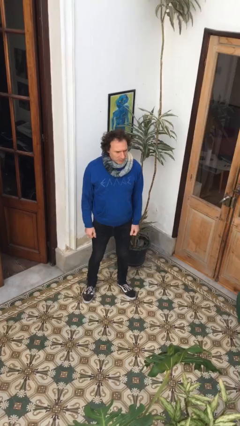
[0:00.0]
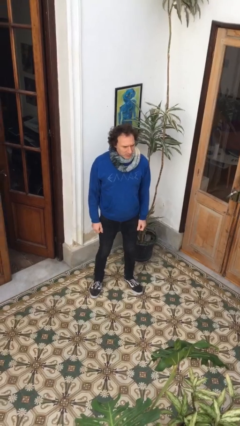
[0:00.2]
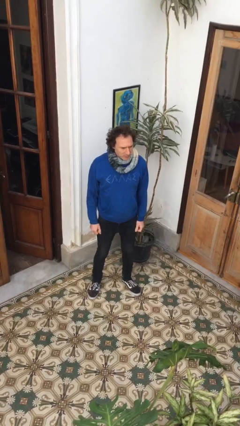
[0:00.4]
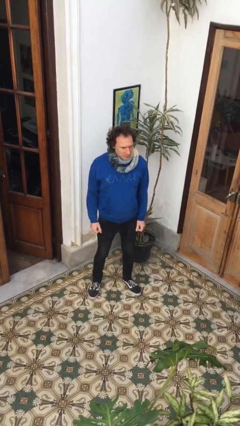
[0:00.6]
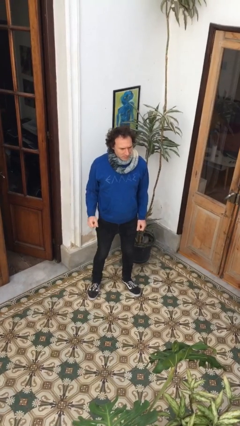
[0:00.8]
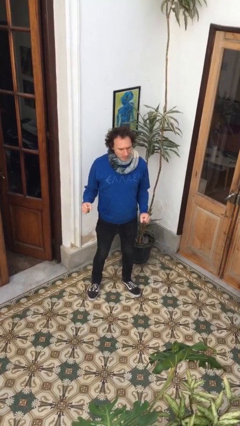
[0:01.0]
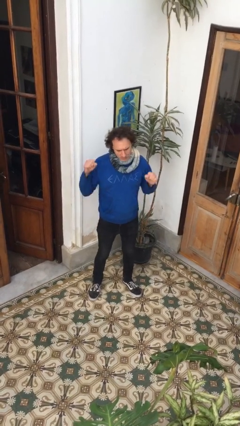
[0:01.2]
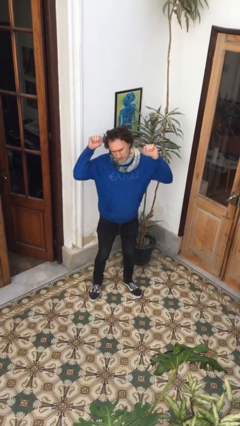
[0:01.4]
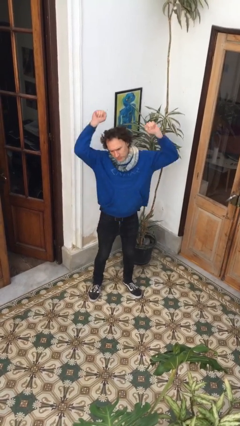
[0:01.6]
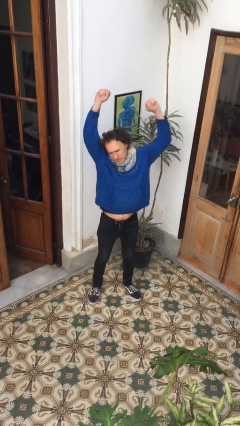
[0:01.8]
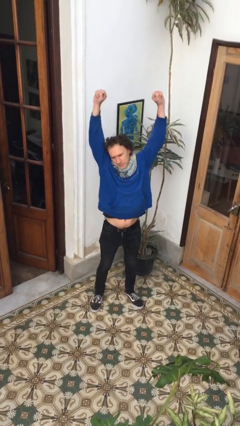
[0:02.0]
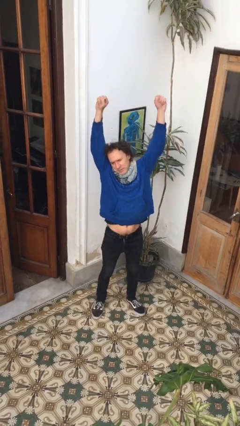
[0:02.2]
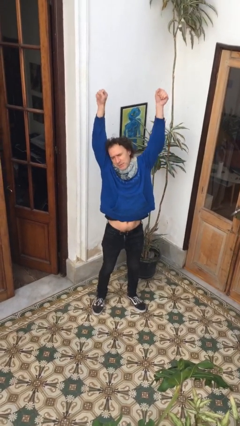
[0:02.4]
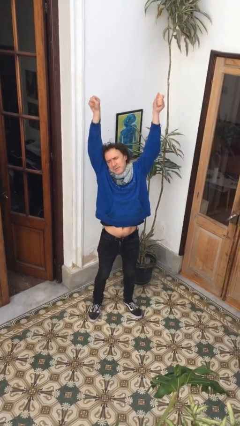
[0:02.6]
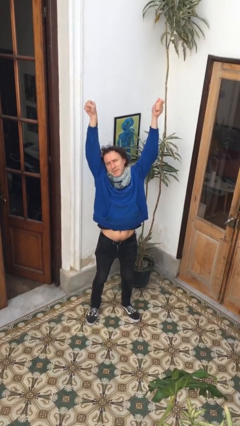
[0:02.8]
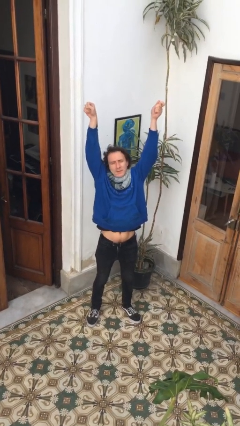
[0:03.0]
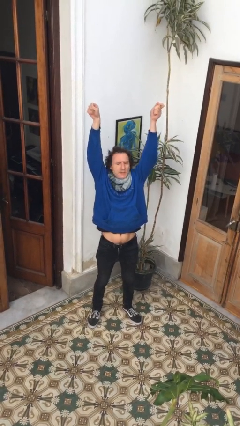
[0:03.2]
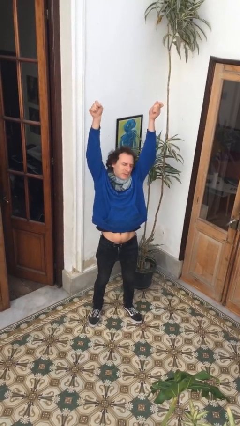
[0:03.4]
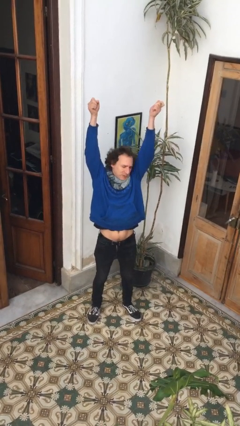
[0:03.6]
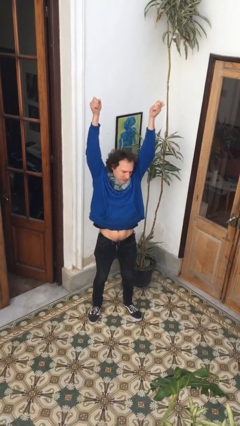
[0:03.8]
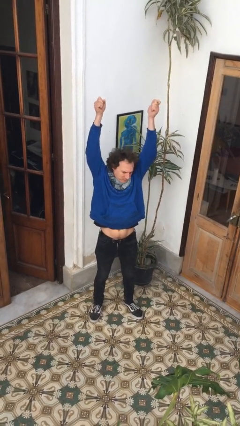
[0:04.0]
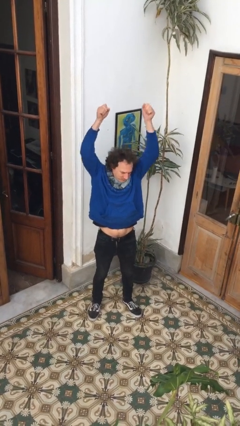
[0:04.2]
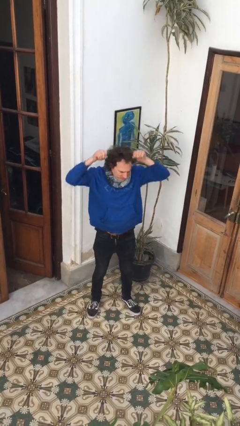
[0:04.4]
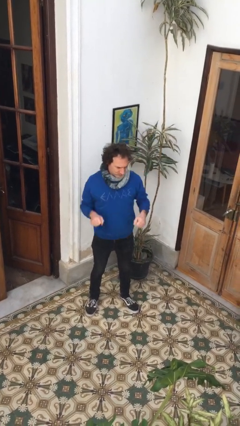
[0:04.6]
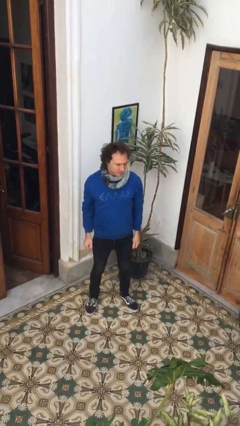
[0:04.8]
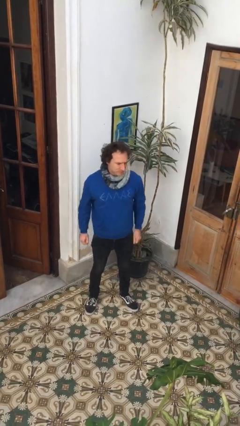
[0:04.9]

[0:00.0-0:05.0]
person stretches arms over head

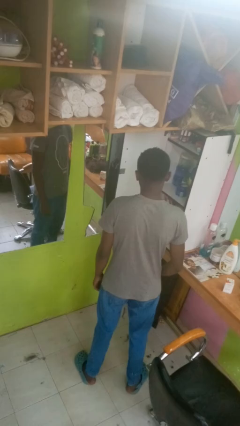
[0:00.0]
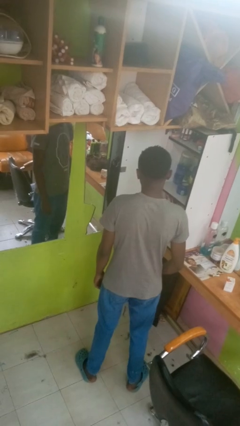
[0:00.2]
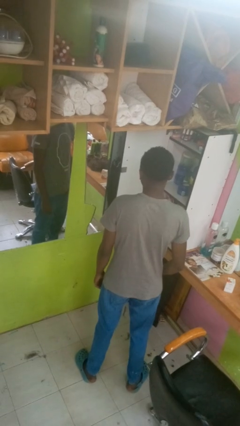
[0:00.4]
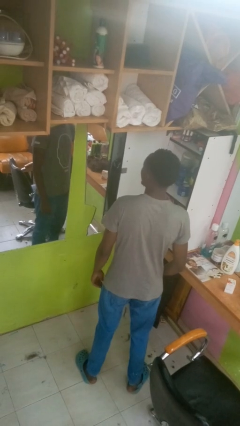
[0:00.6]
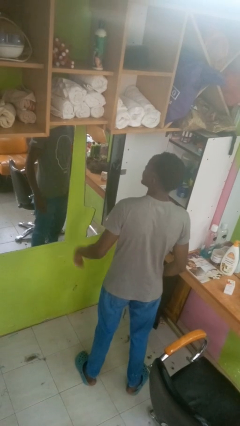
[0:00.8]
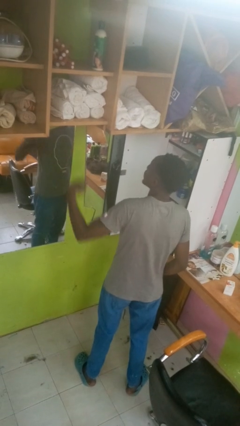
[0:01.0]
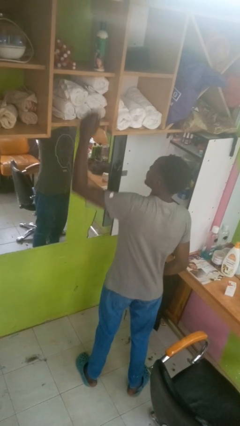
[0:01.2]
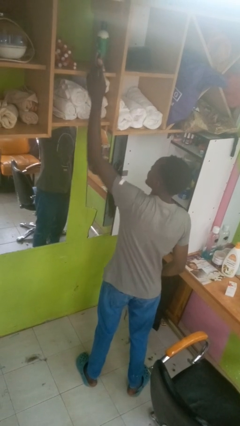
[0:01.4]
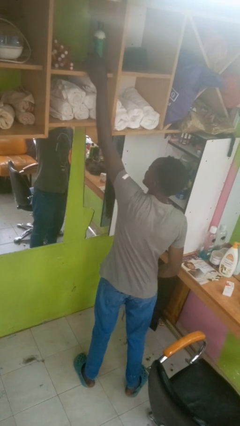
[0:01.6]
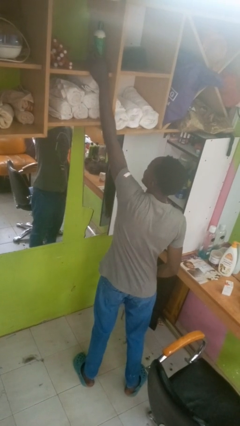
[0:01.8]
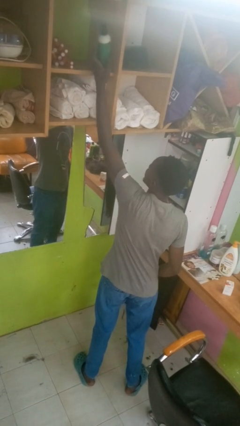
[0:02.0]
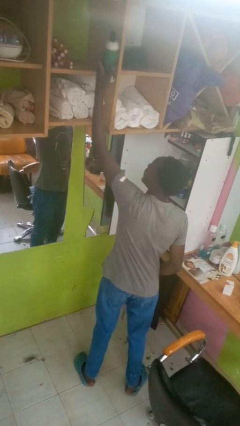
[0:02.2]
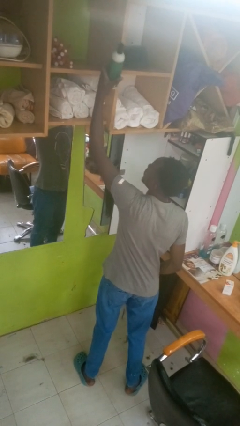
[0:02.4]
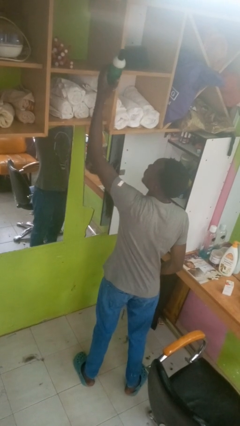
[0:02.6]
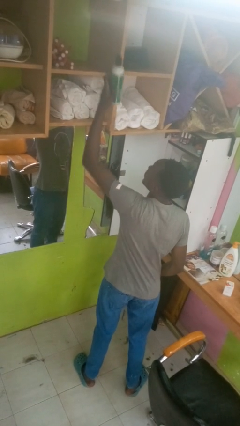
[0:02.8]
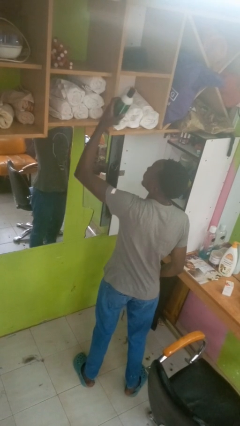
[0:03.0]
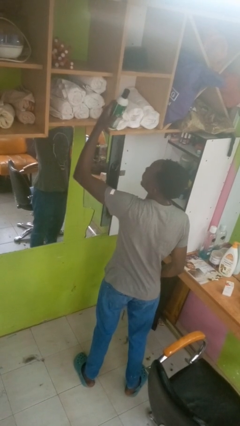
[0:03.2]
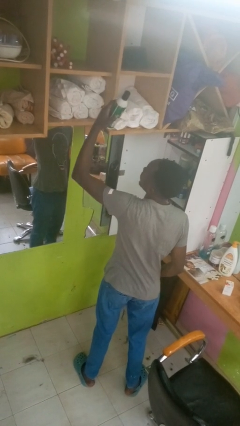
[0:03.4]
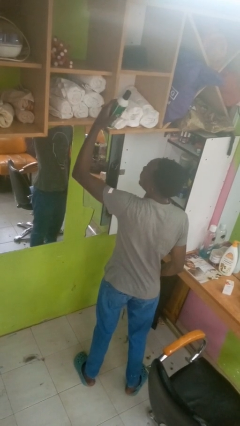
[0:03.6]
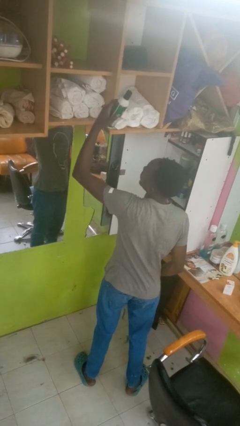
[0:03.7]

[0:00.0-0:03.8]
person picks up object from shelf

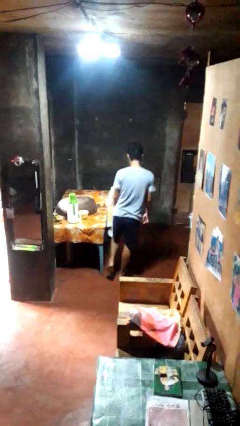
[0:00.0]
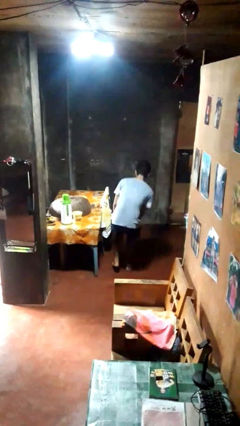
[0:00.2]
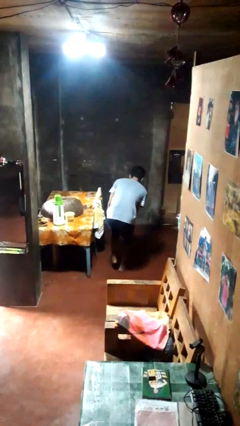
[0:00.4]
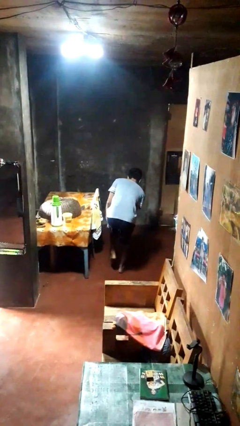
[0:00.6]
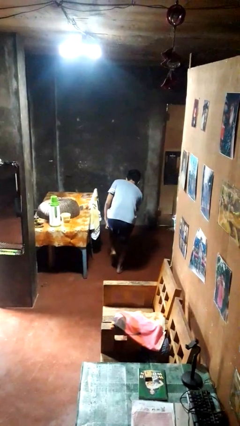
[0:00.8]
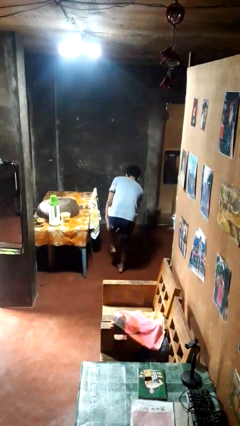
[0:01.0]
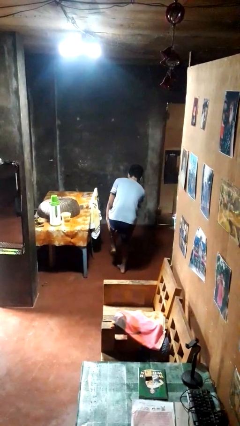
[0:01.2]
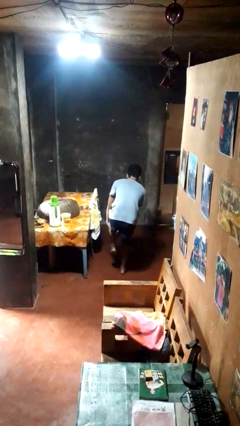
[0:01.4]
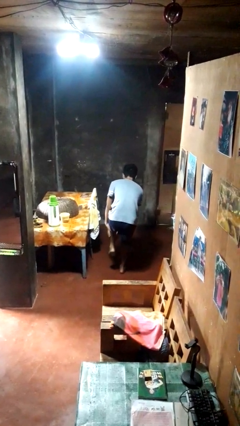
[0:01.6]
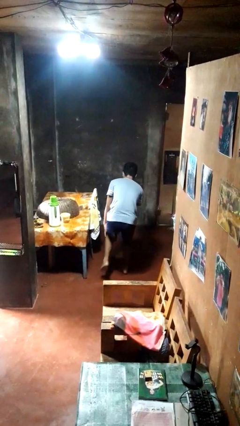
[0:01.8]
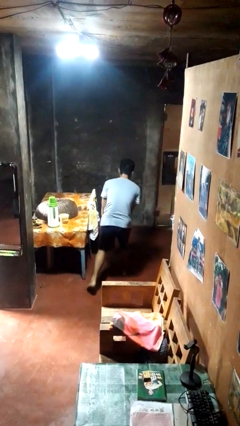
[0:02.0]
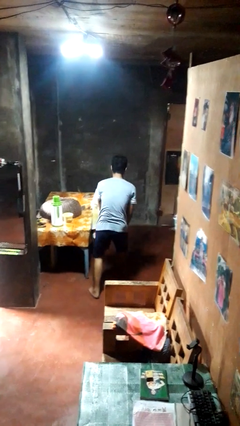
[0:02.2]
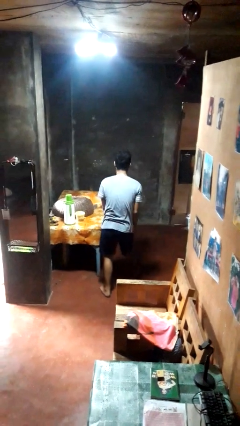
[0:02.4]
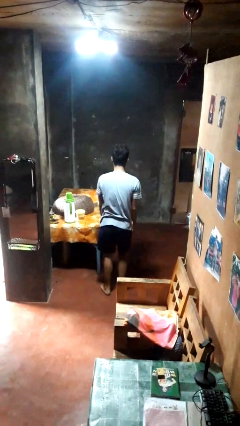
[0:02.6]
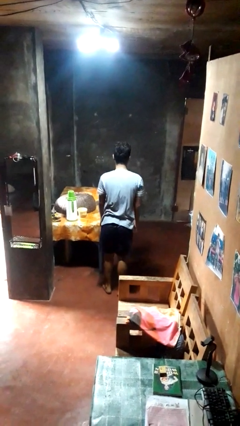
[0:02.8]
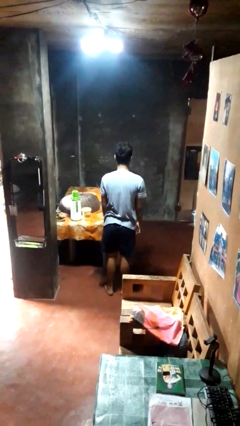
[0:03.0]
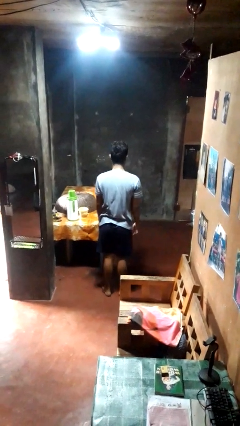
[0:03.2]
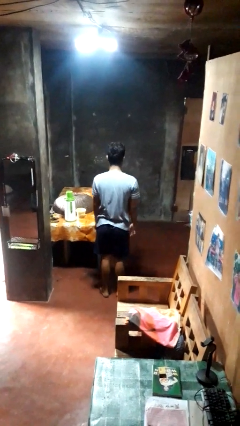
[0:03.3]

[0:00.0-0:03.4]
person bumps into table

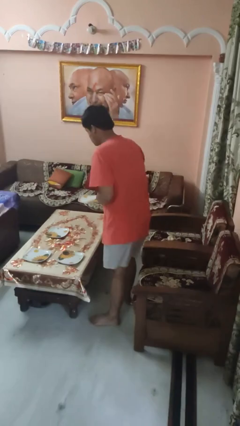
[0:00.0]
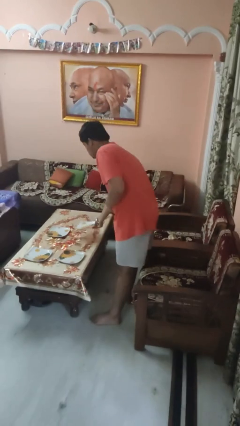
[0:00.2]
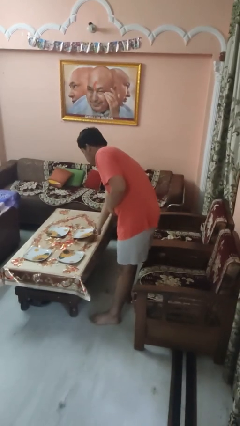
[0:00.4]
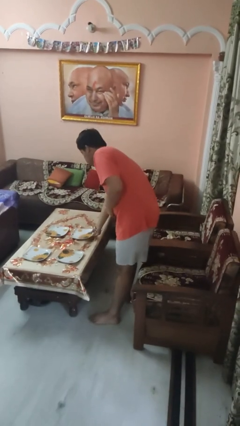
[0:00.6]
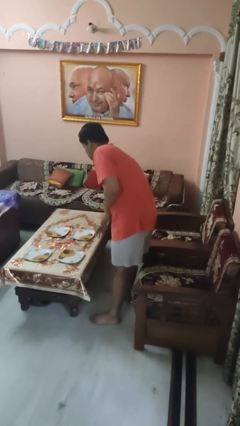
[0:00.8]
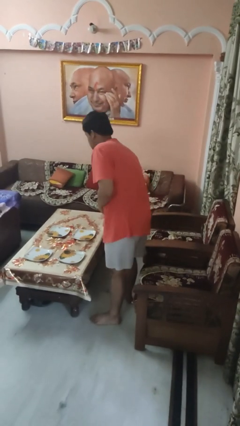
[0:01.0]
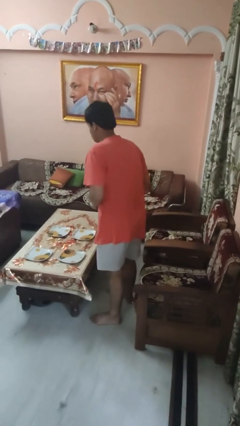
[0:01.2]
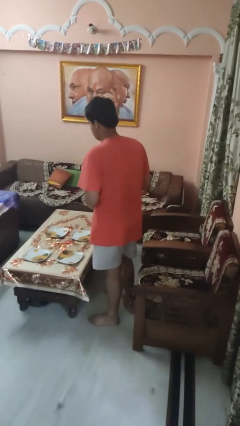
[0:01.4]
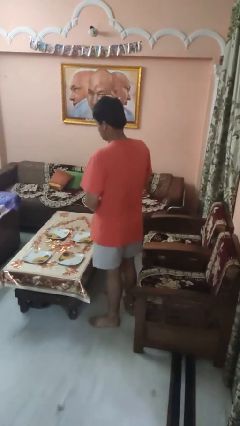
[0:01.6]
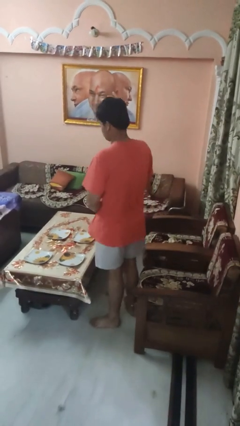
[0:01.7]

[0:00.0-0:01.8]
person sets table

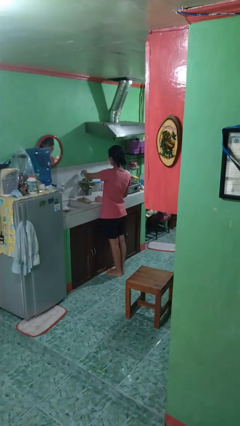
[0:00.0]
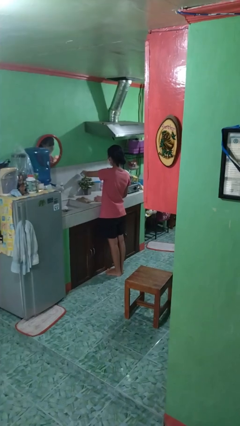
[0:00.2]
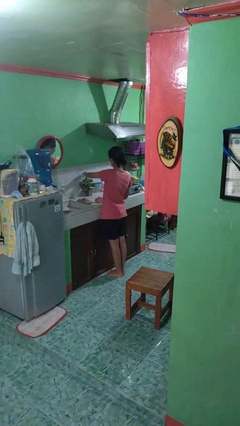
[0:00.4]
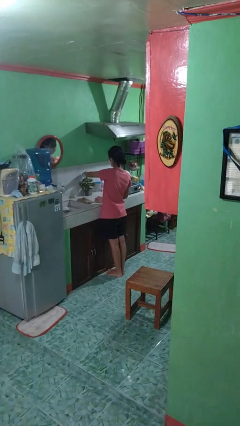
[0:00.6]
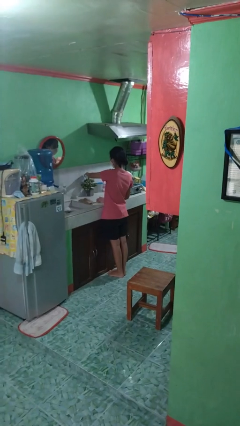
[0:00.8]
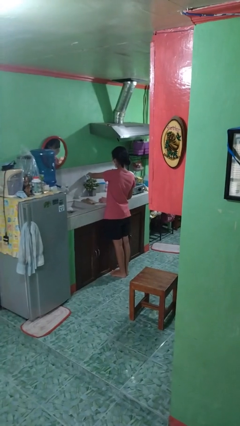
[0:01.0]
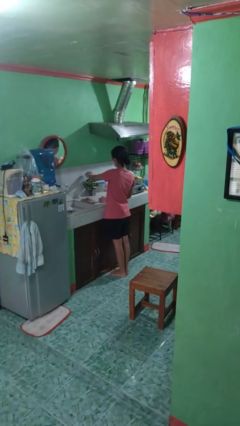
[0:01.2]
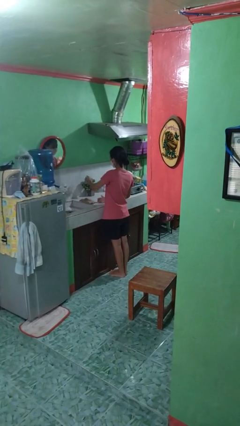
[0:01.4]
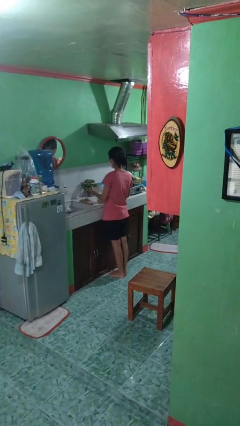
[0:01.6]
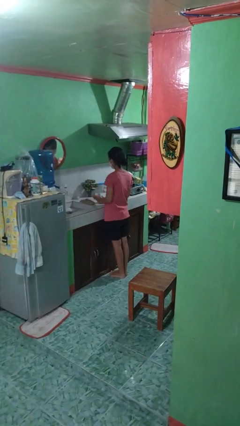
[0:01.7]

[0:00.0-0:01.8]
person waters houseplant

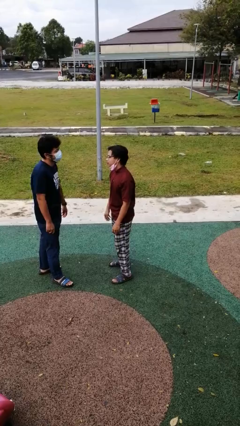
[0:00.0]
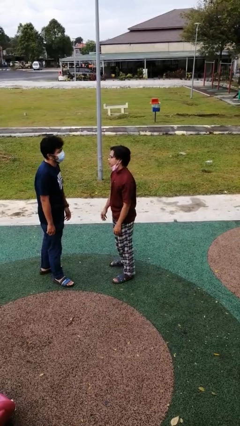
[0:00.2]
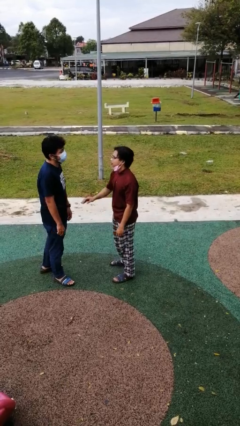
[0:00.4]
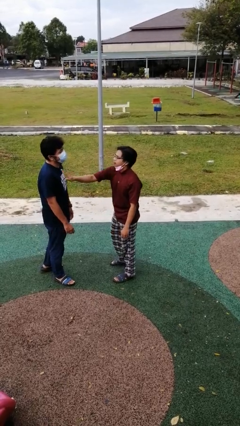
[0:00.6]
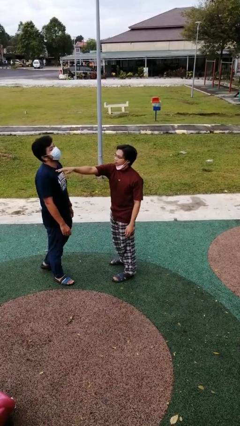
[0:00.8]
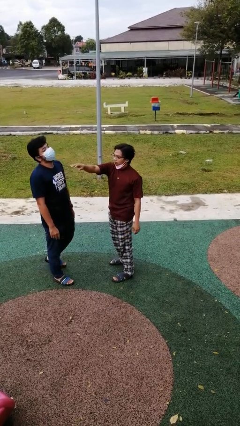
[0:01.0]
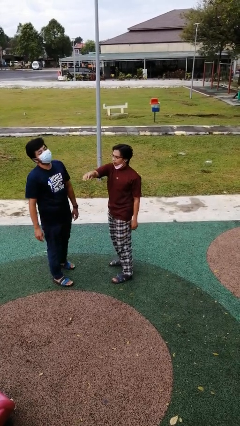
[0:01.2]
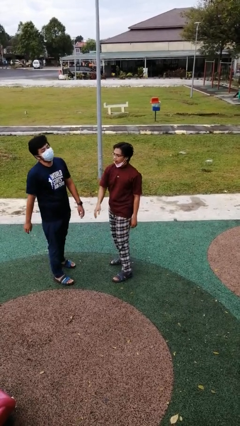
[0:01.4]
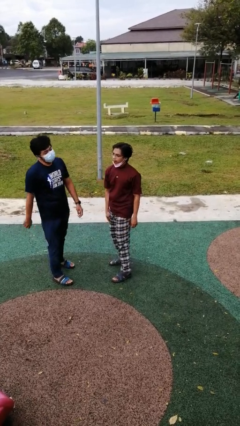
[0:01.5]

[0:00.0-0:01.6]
person shoves person

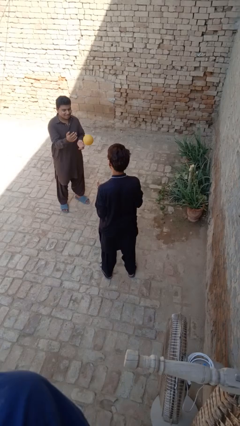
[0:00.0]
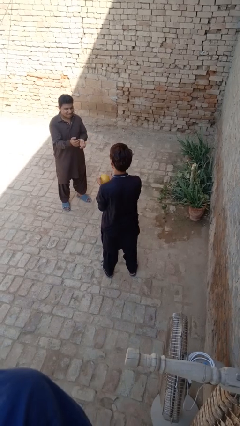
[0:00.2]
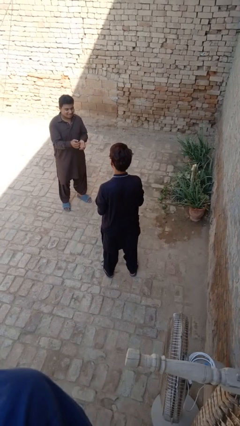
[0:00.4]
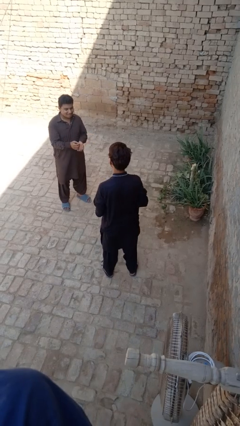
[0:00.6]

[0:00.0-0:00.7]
person catches object from person
